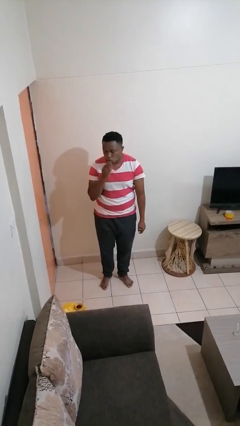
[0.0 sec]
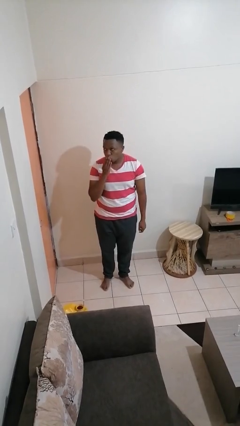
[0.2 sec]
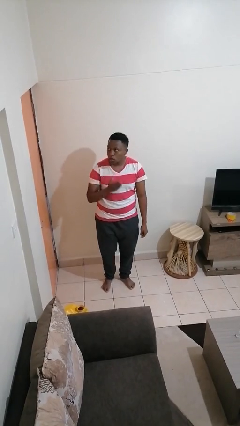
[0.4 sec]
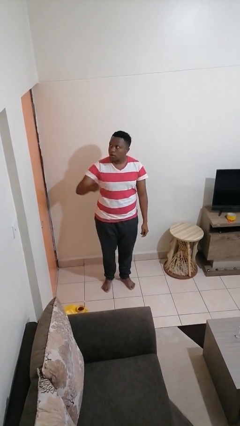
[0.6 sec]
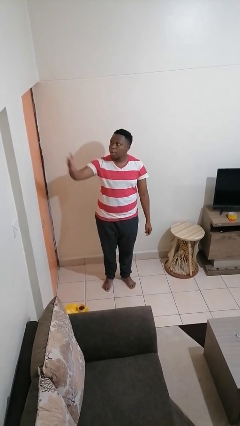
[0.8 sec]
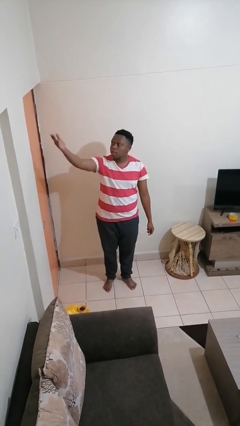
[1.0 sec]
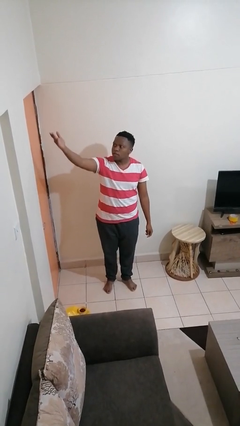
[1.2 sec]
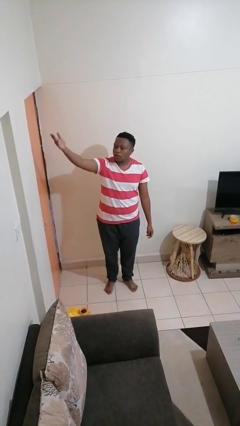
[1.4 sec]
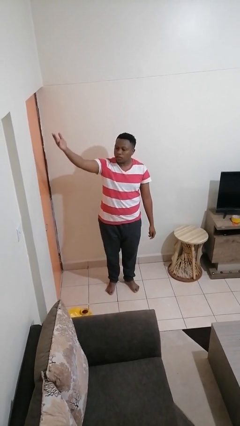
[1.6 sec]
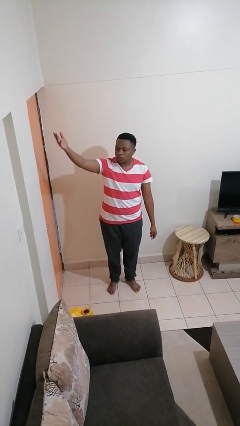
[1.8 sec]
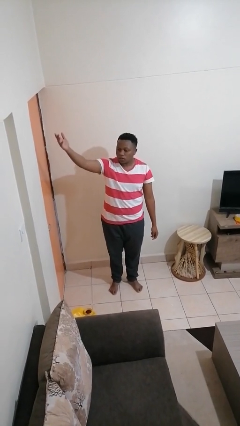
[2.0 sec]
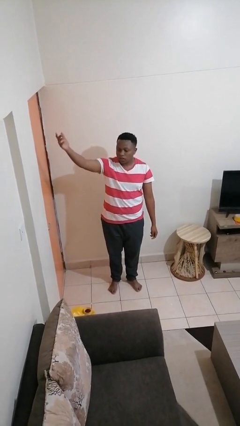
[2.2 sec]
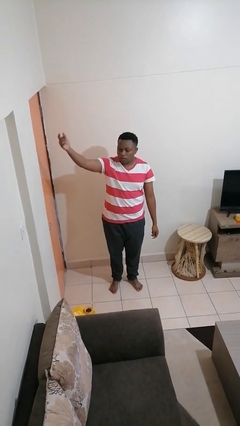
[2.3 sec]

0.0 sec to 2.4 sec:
person gestures blow kiss

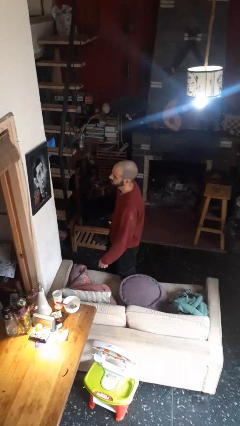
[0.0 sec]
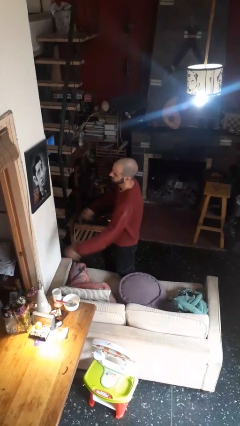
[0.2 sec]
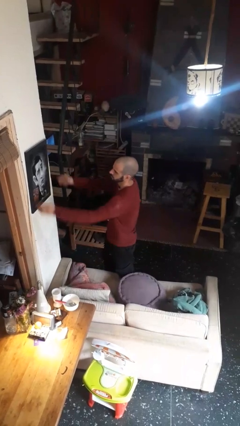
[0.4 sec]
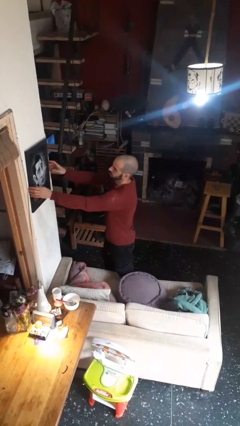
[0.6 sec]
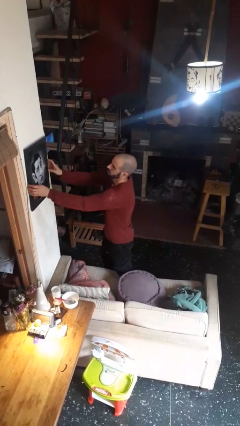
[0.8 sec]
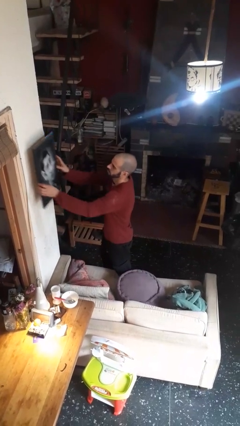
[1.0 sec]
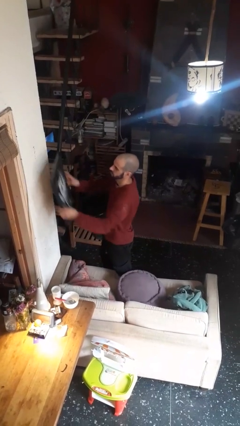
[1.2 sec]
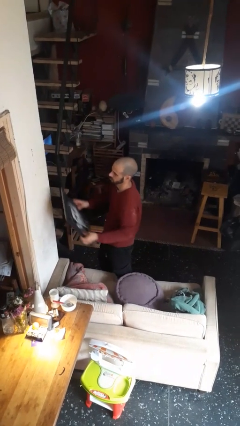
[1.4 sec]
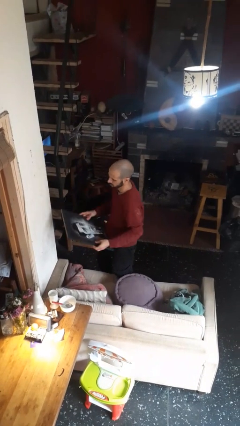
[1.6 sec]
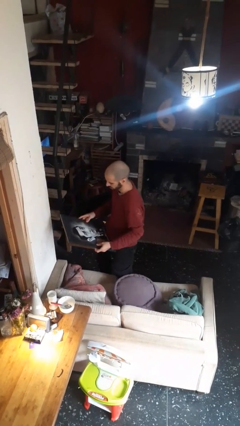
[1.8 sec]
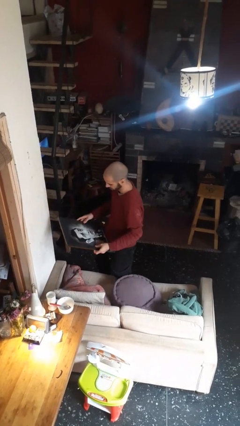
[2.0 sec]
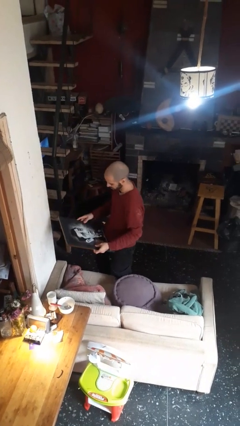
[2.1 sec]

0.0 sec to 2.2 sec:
person takes down picture frame

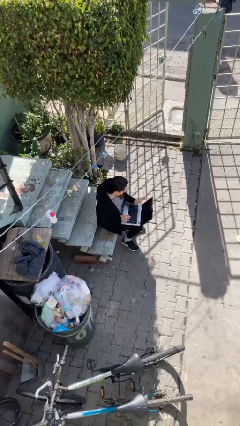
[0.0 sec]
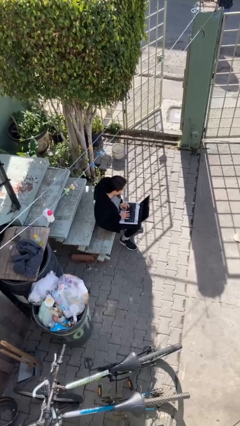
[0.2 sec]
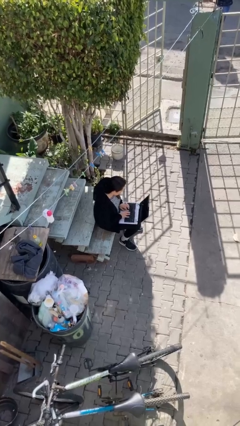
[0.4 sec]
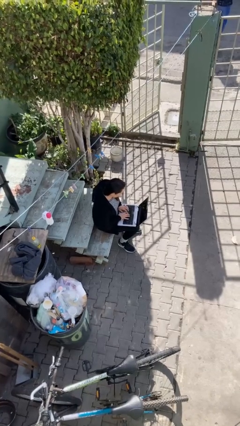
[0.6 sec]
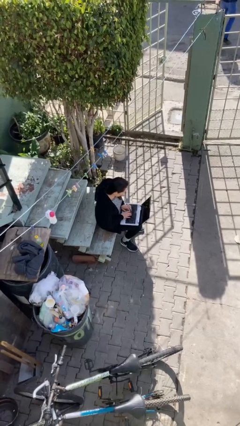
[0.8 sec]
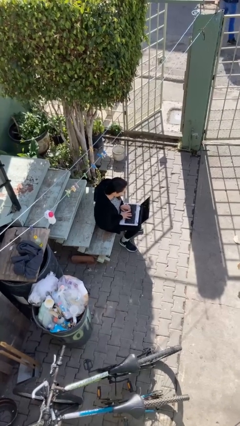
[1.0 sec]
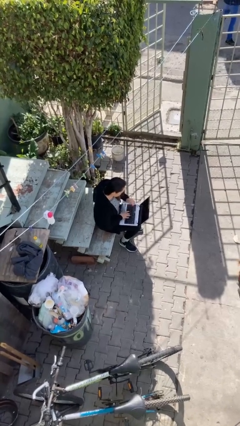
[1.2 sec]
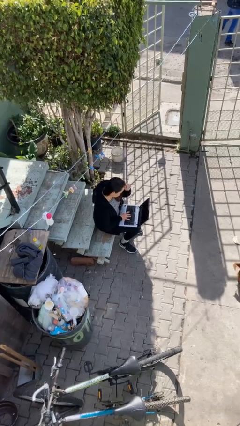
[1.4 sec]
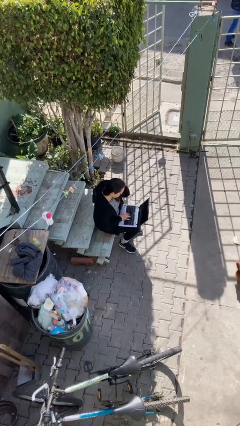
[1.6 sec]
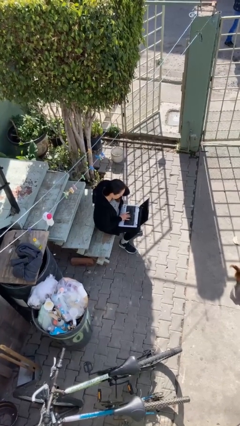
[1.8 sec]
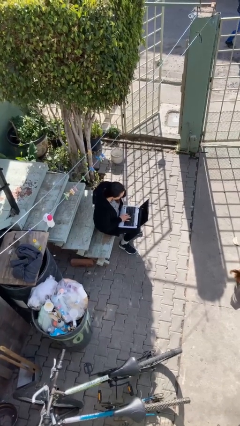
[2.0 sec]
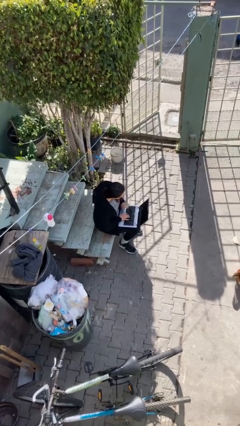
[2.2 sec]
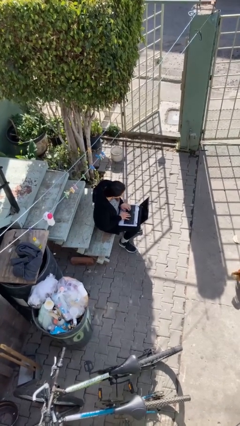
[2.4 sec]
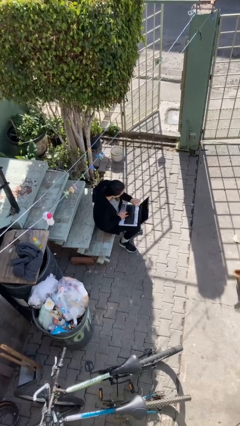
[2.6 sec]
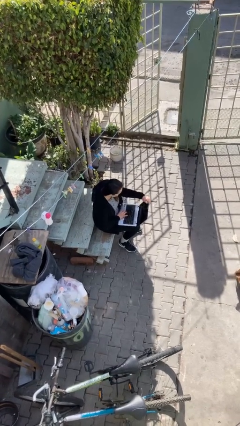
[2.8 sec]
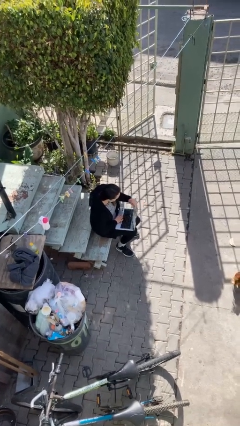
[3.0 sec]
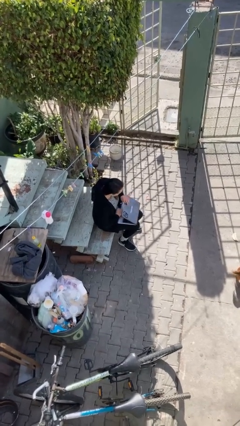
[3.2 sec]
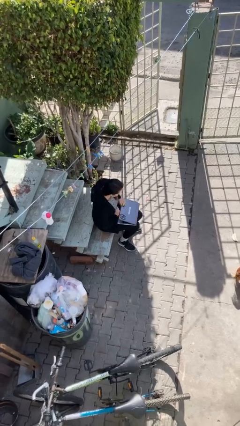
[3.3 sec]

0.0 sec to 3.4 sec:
person interacts with laptop

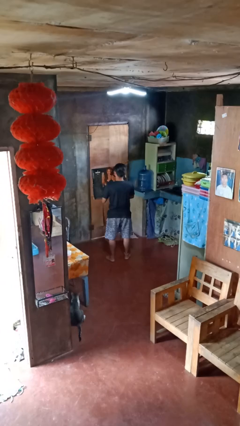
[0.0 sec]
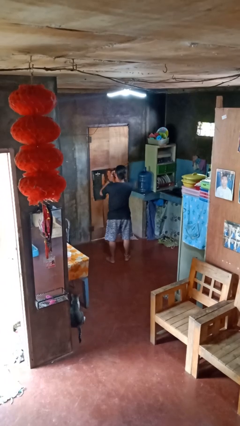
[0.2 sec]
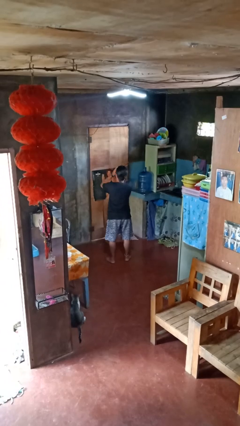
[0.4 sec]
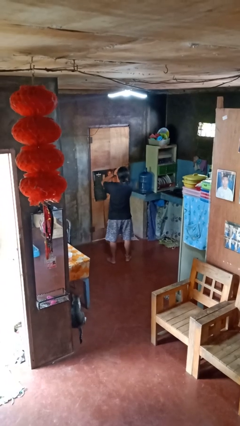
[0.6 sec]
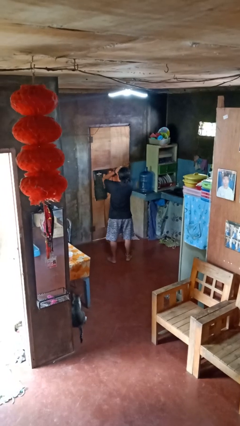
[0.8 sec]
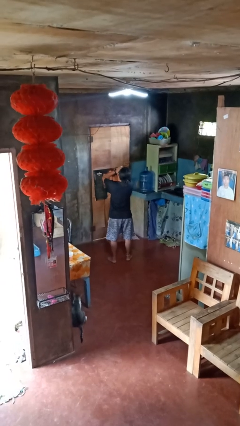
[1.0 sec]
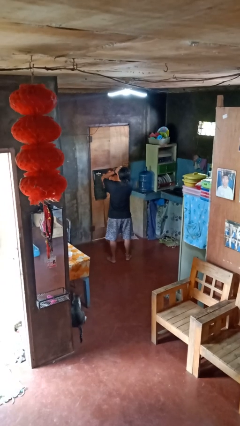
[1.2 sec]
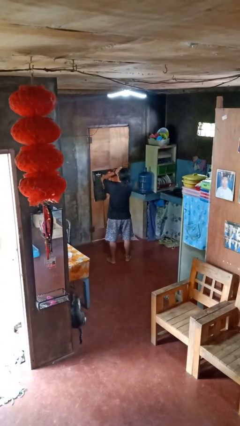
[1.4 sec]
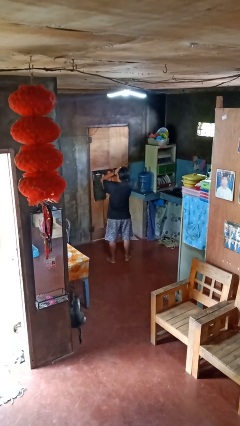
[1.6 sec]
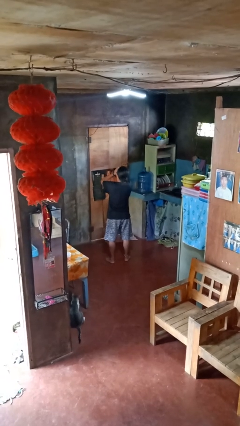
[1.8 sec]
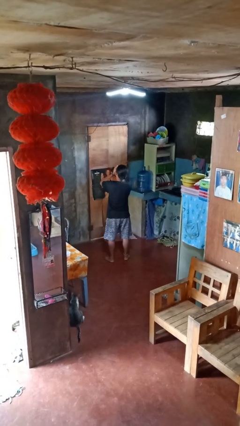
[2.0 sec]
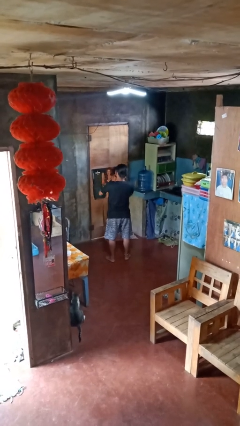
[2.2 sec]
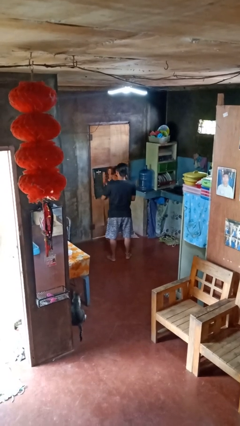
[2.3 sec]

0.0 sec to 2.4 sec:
person yawns

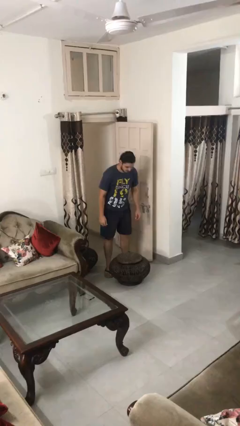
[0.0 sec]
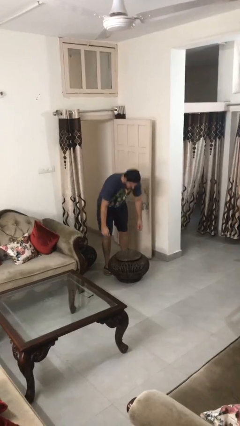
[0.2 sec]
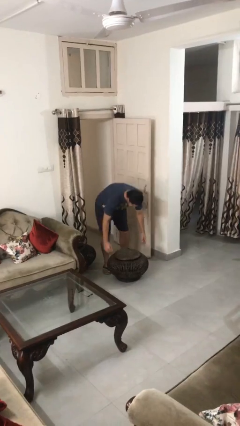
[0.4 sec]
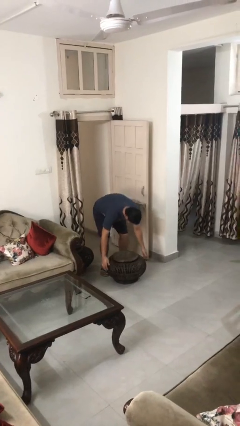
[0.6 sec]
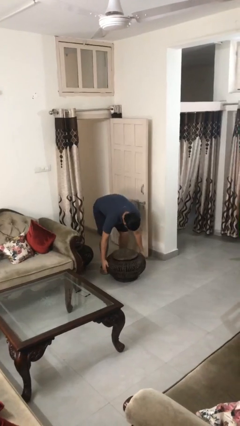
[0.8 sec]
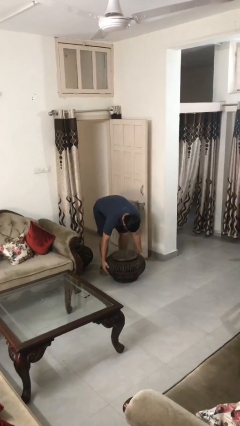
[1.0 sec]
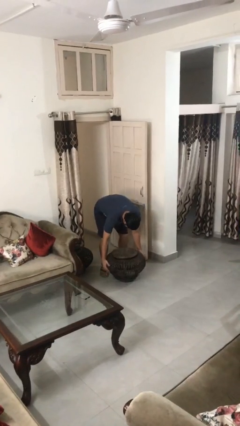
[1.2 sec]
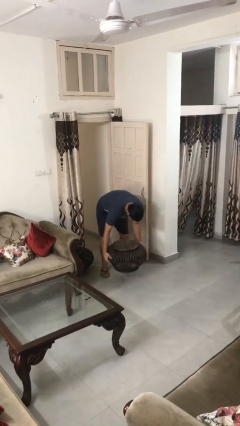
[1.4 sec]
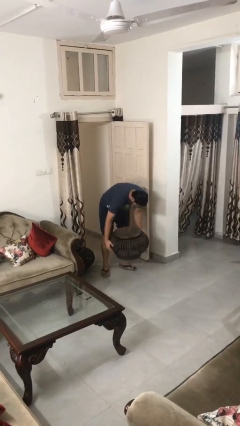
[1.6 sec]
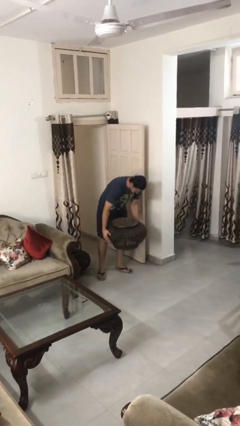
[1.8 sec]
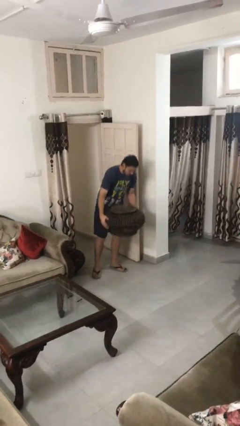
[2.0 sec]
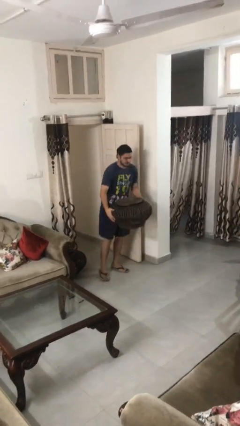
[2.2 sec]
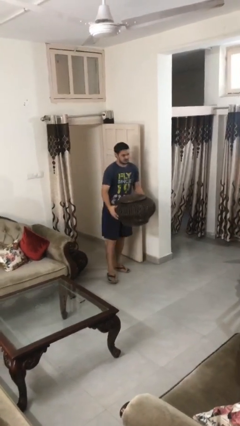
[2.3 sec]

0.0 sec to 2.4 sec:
person picks up object from floor

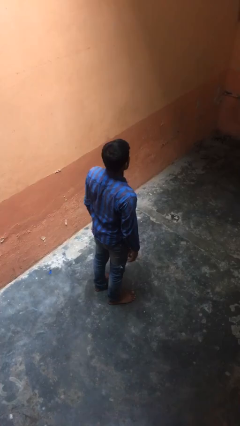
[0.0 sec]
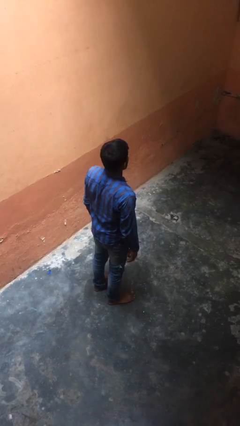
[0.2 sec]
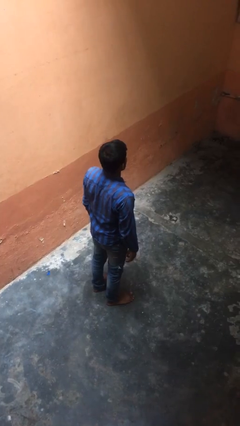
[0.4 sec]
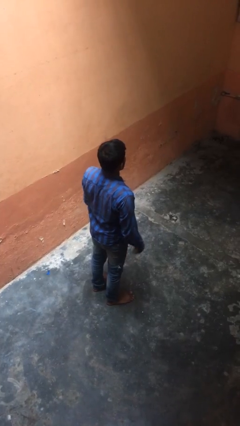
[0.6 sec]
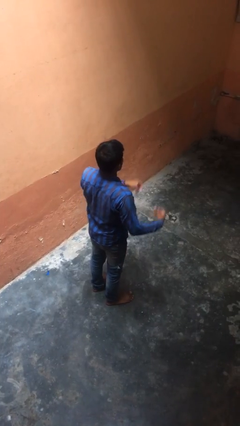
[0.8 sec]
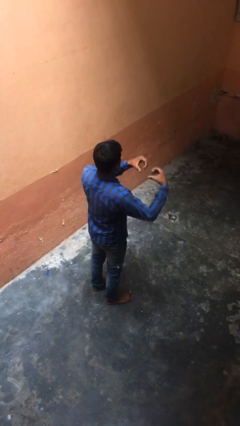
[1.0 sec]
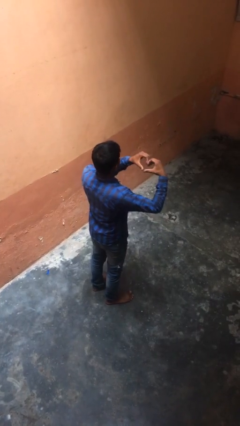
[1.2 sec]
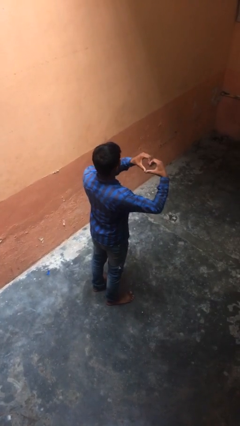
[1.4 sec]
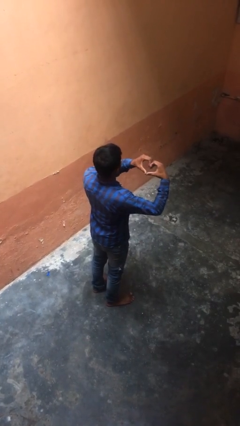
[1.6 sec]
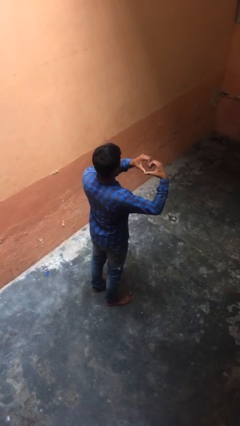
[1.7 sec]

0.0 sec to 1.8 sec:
person gestures heart

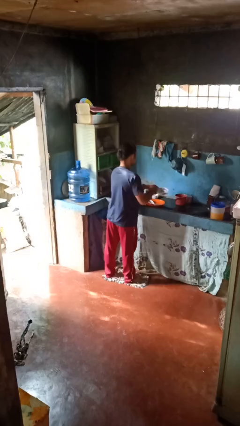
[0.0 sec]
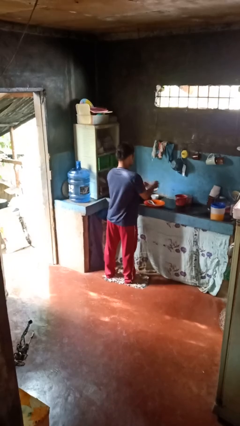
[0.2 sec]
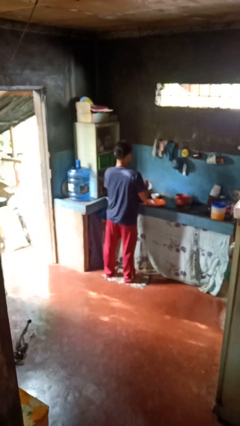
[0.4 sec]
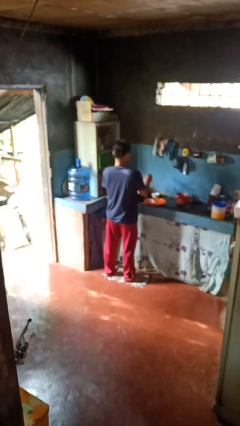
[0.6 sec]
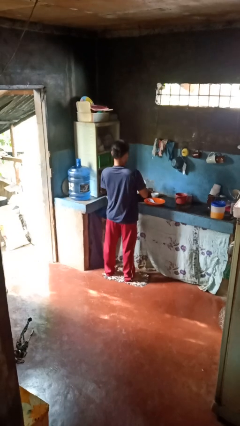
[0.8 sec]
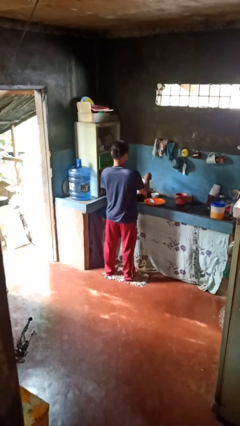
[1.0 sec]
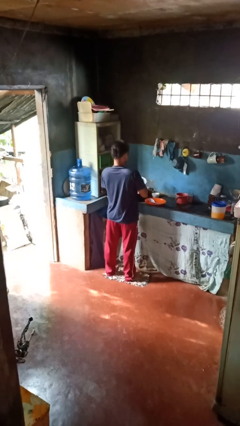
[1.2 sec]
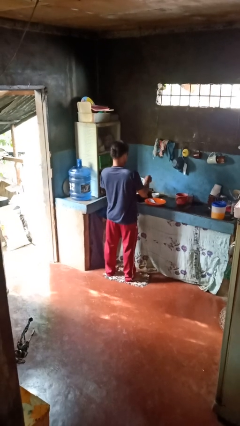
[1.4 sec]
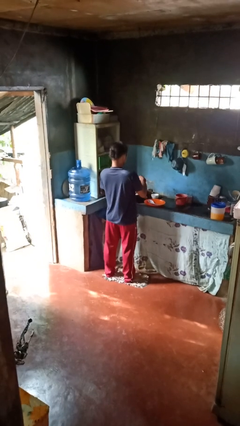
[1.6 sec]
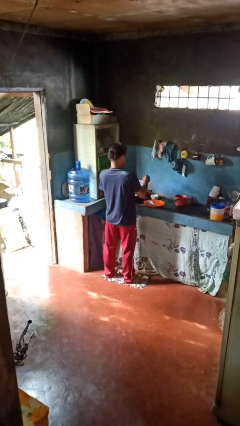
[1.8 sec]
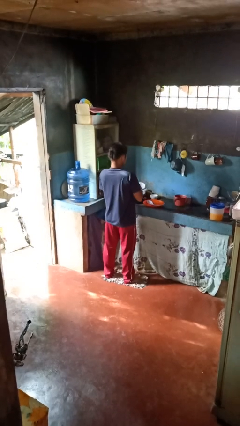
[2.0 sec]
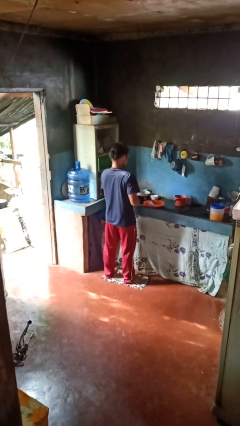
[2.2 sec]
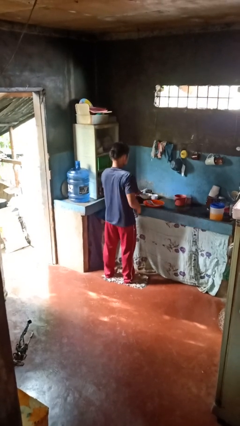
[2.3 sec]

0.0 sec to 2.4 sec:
person washes dish
